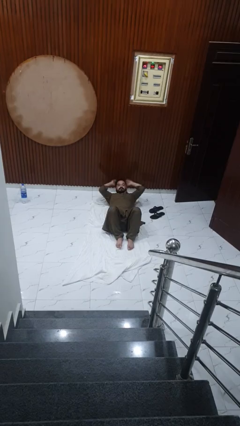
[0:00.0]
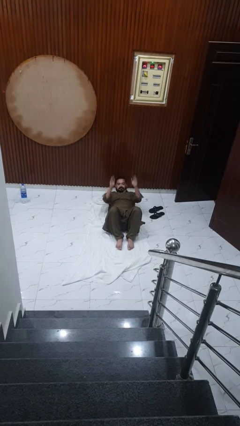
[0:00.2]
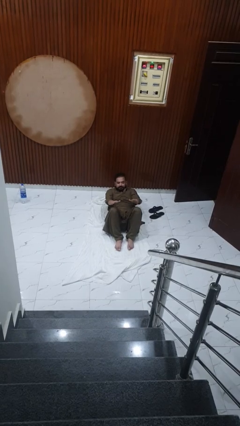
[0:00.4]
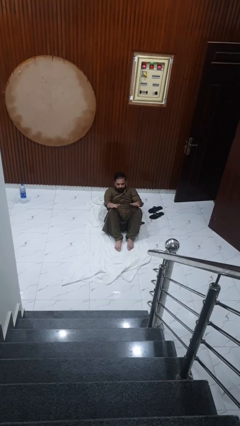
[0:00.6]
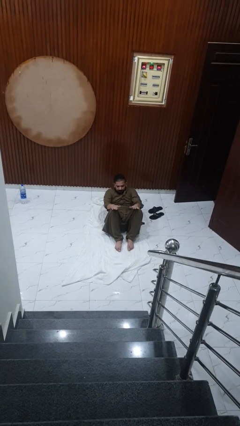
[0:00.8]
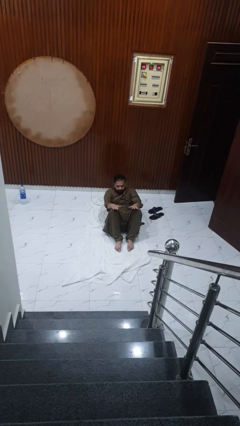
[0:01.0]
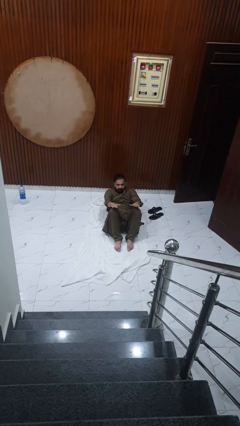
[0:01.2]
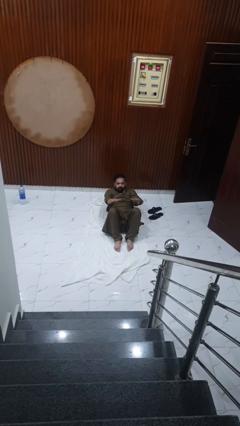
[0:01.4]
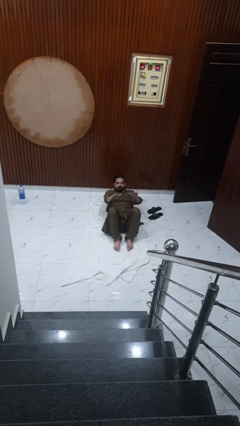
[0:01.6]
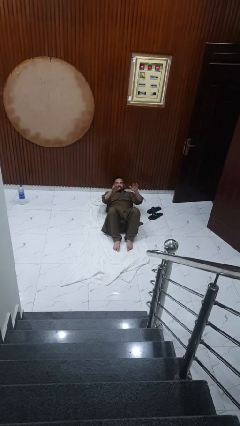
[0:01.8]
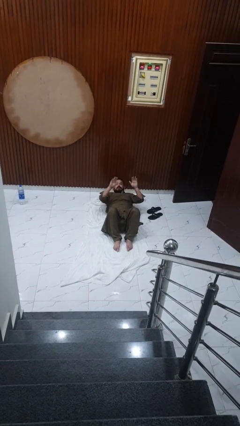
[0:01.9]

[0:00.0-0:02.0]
person exercises with situp

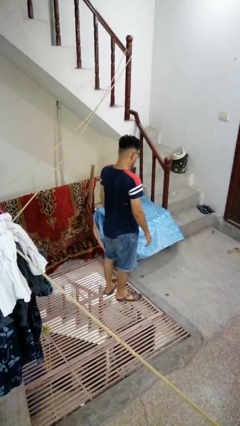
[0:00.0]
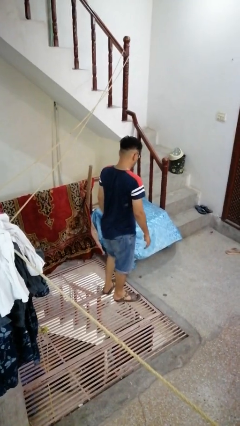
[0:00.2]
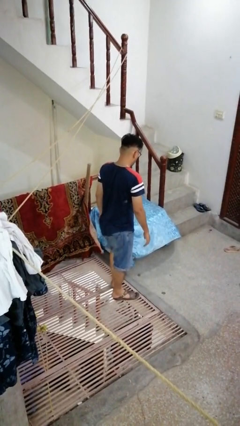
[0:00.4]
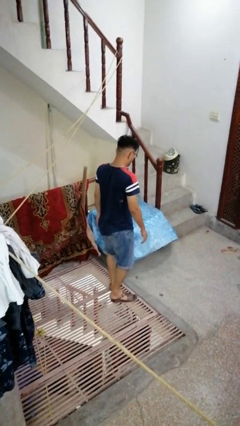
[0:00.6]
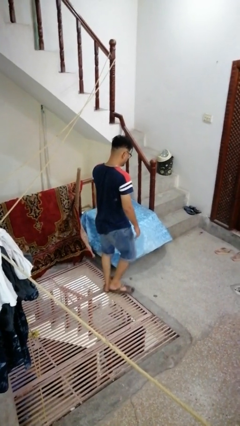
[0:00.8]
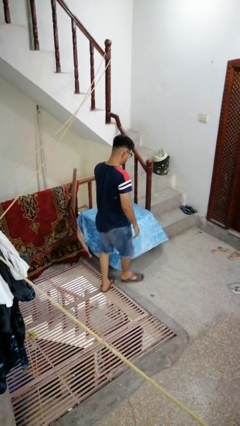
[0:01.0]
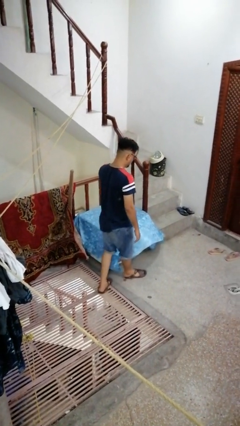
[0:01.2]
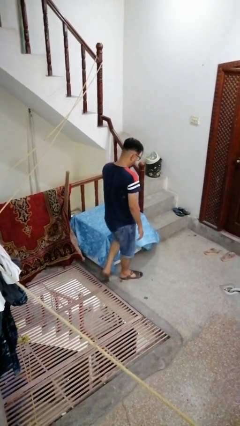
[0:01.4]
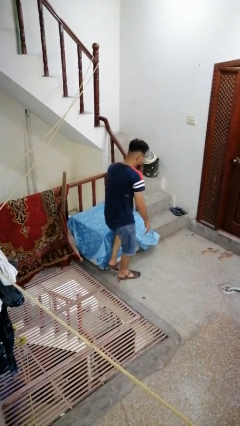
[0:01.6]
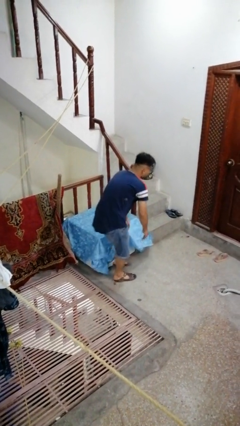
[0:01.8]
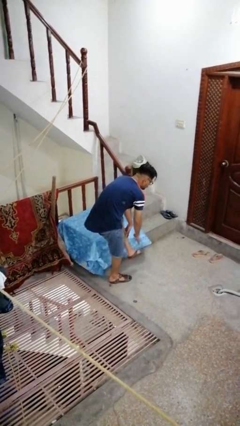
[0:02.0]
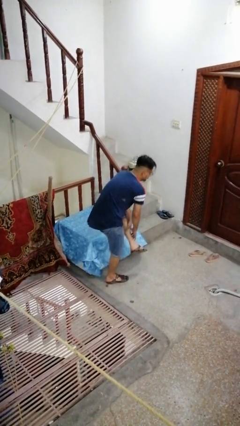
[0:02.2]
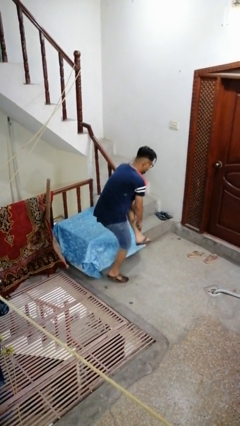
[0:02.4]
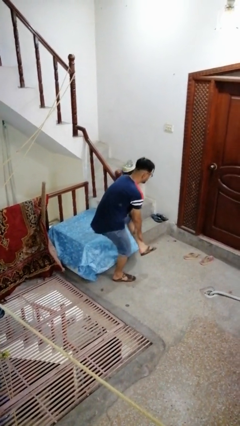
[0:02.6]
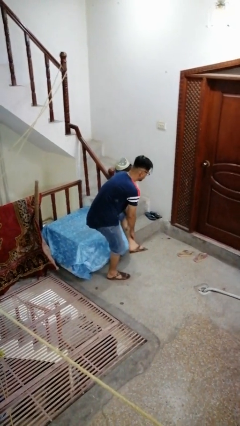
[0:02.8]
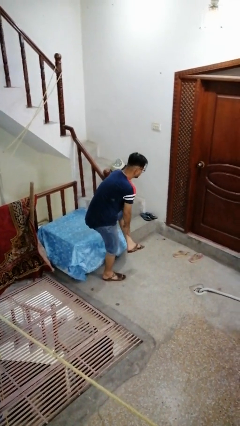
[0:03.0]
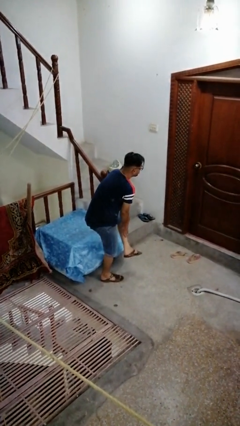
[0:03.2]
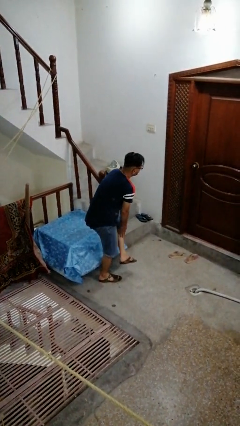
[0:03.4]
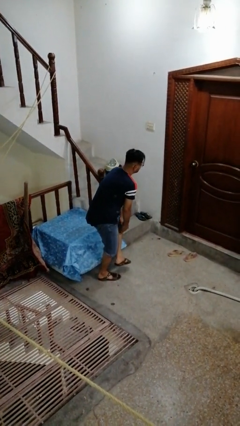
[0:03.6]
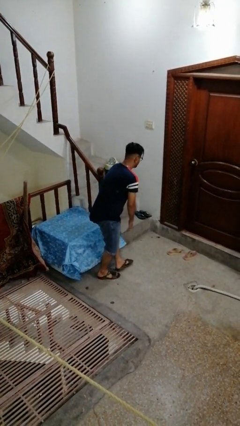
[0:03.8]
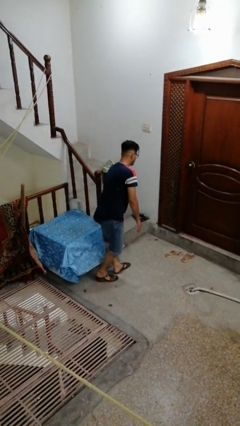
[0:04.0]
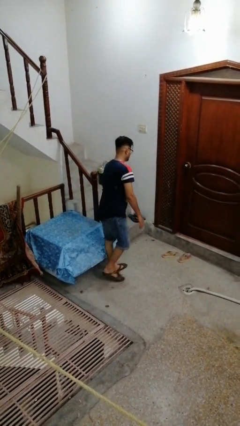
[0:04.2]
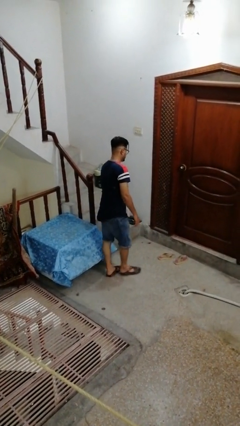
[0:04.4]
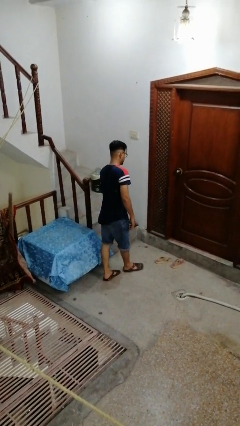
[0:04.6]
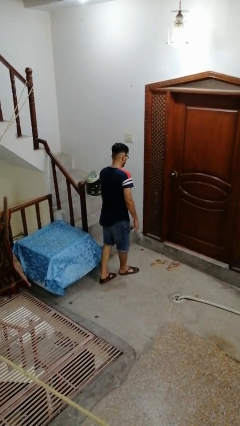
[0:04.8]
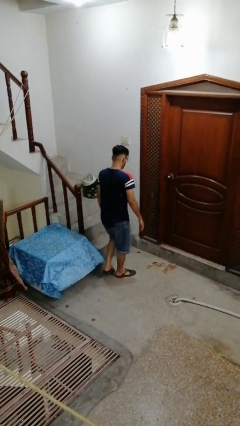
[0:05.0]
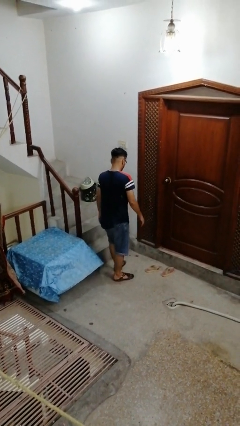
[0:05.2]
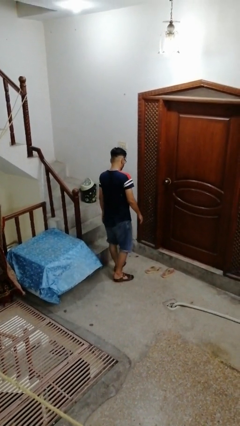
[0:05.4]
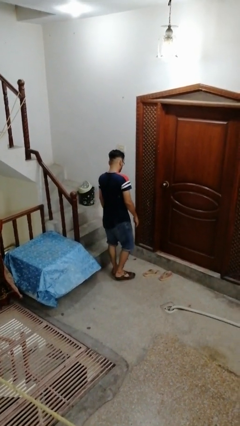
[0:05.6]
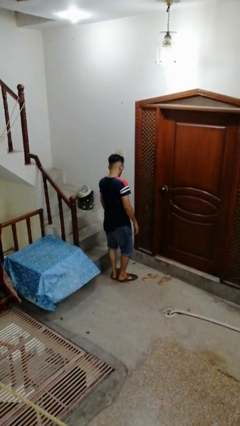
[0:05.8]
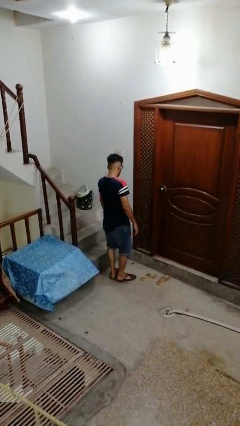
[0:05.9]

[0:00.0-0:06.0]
person bumps into table

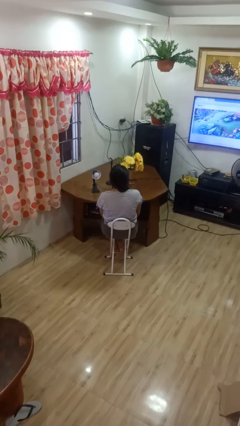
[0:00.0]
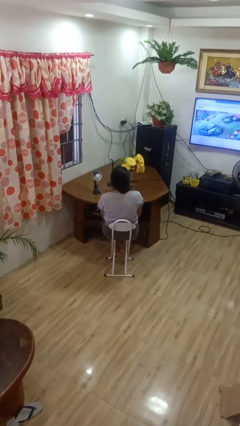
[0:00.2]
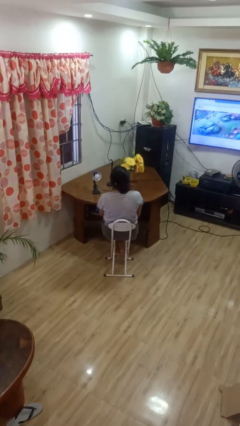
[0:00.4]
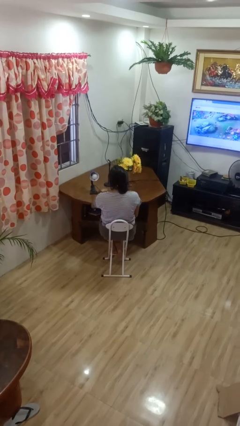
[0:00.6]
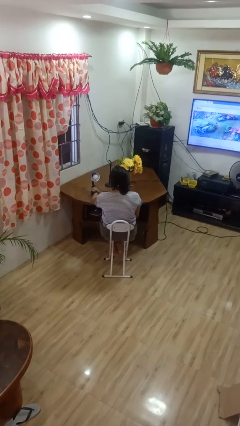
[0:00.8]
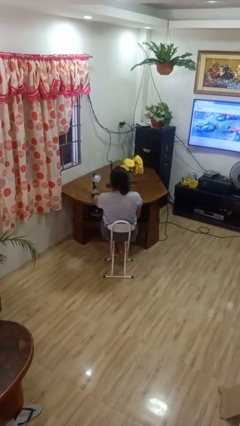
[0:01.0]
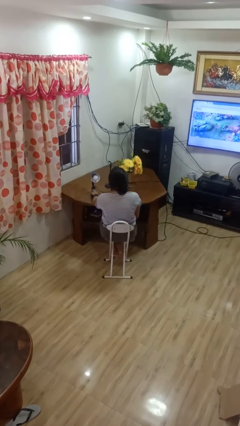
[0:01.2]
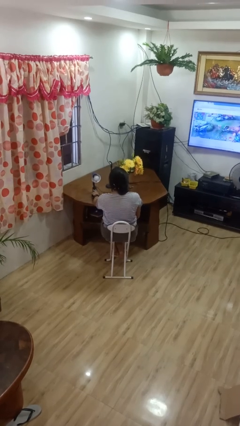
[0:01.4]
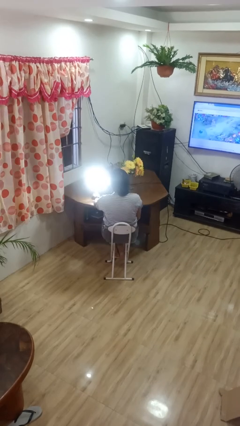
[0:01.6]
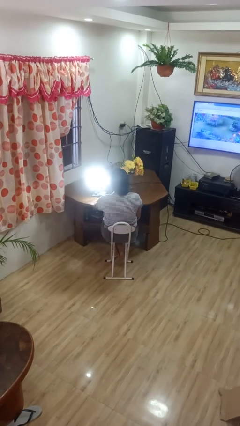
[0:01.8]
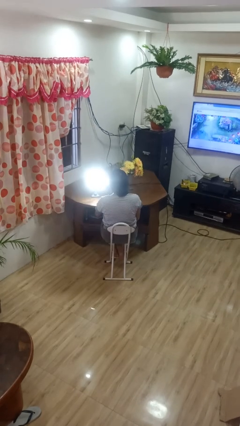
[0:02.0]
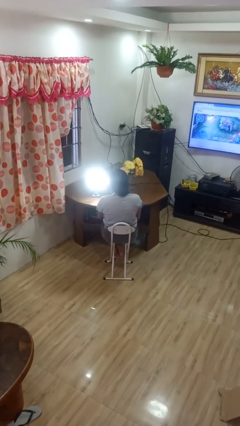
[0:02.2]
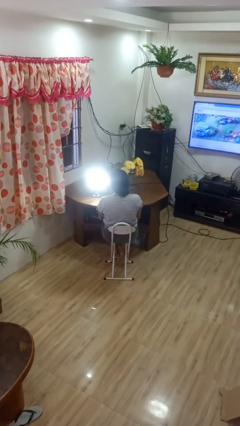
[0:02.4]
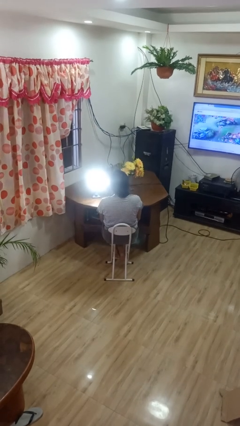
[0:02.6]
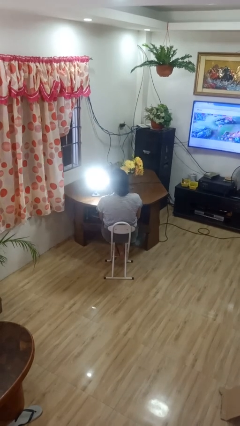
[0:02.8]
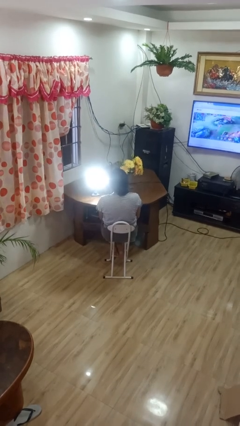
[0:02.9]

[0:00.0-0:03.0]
person turns on lamp

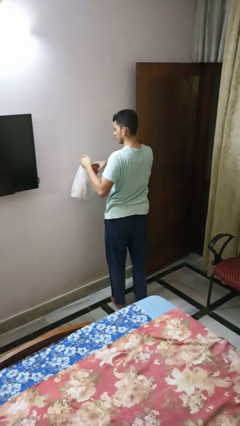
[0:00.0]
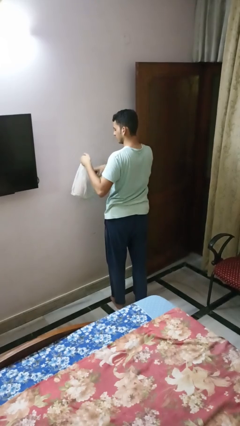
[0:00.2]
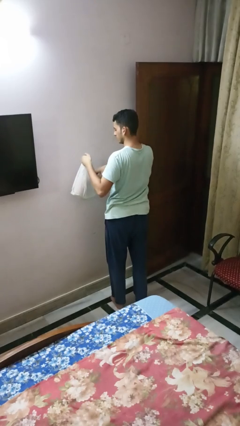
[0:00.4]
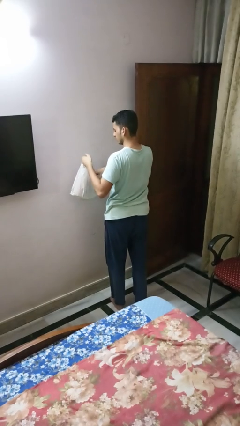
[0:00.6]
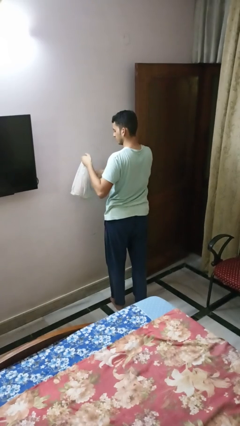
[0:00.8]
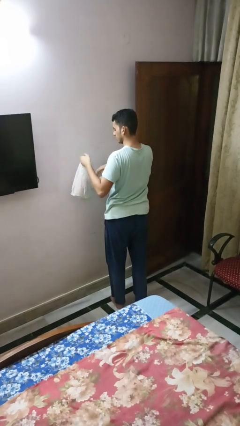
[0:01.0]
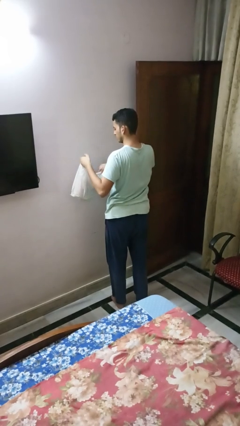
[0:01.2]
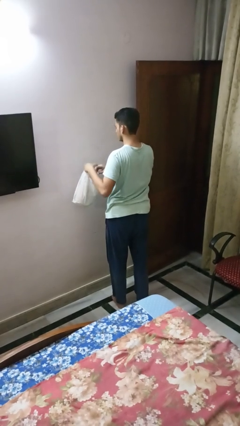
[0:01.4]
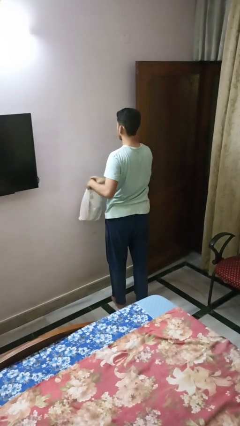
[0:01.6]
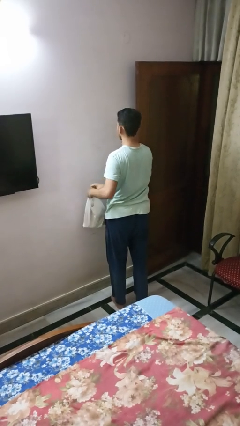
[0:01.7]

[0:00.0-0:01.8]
person puts object into bag

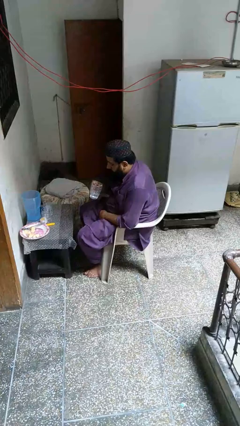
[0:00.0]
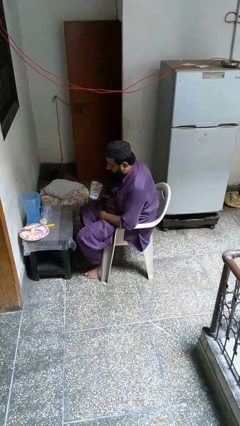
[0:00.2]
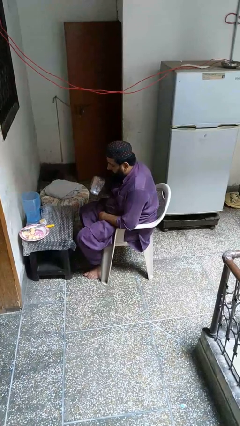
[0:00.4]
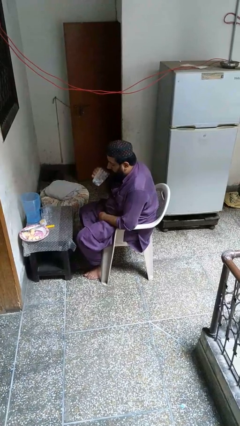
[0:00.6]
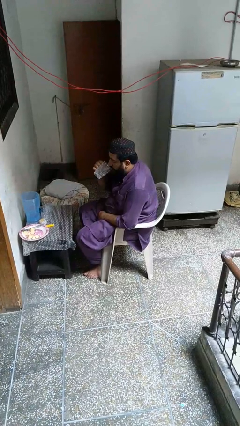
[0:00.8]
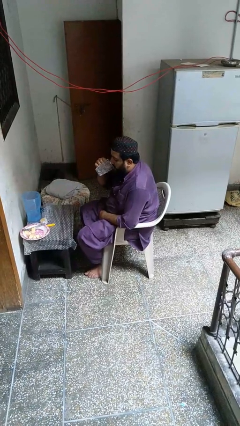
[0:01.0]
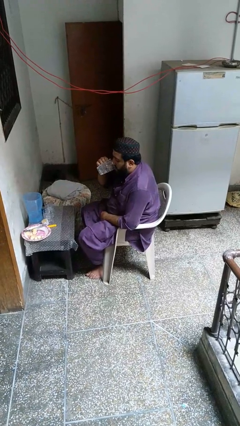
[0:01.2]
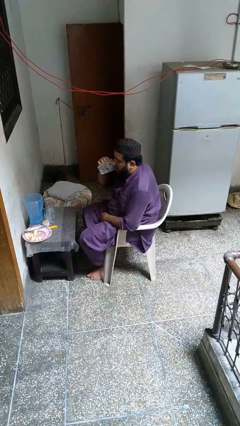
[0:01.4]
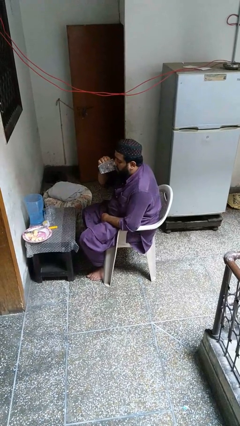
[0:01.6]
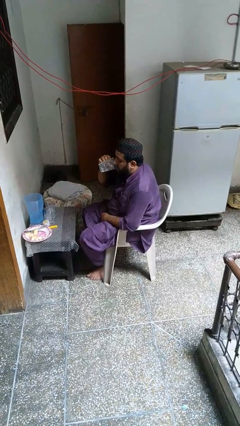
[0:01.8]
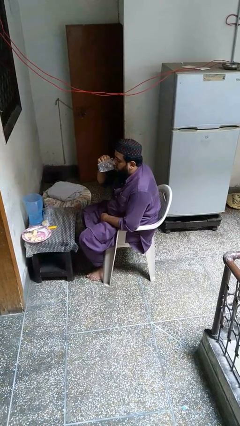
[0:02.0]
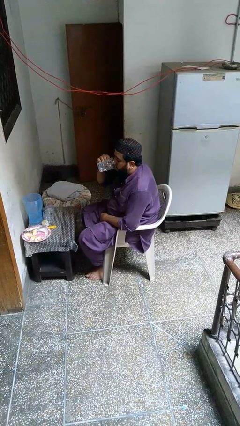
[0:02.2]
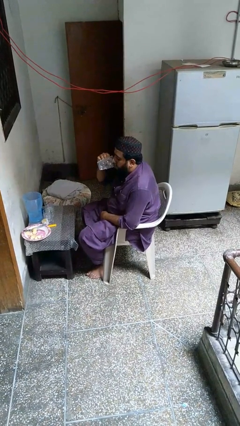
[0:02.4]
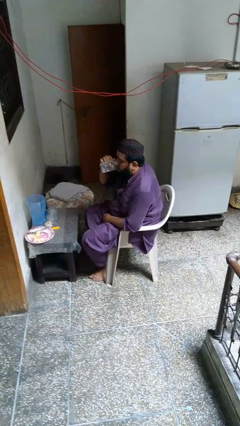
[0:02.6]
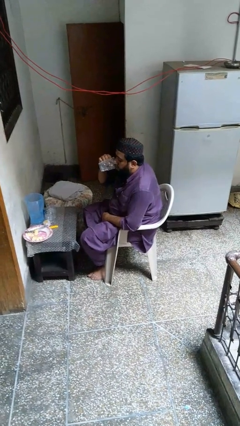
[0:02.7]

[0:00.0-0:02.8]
person drinks from mug

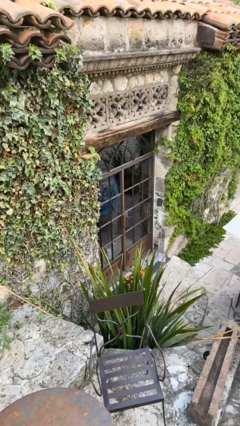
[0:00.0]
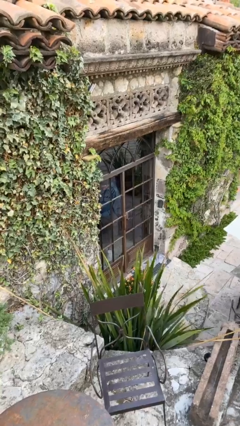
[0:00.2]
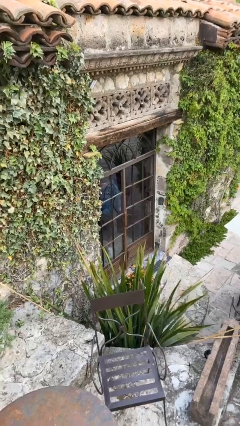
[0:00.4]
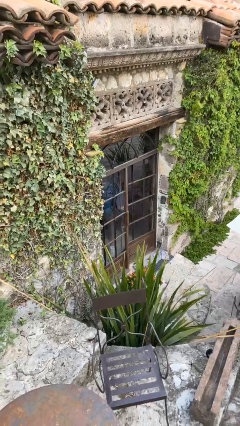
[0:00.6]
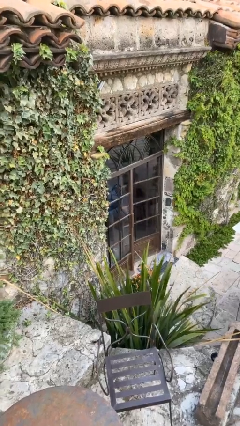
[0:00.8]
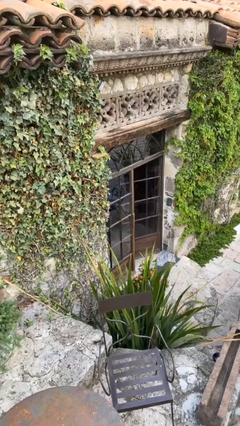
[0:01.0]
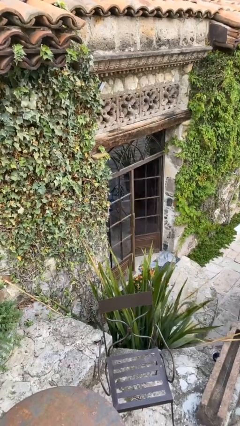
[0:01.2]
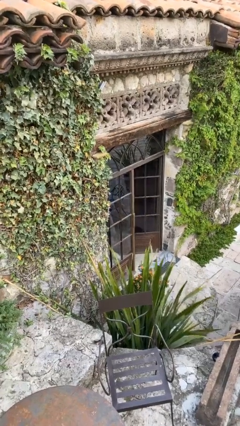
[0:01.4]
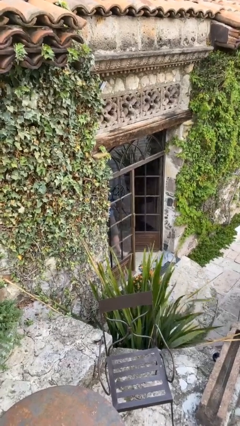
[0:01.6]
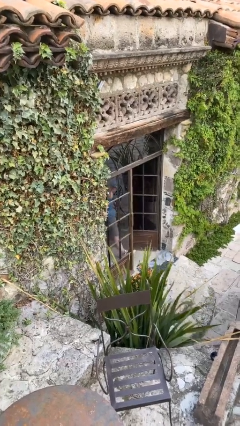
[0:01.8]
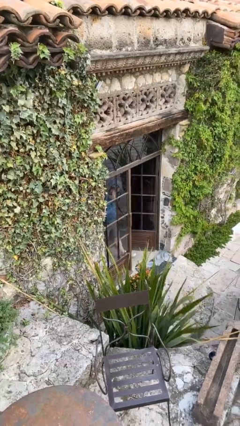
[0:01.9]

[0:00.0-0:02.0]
person opens facility door

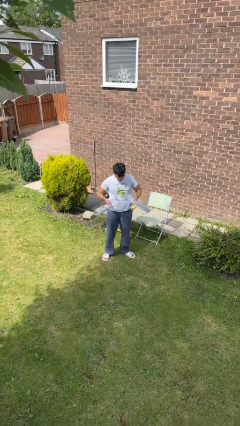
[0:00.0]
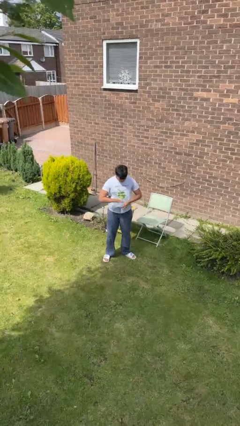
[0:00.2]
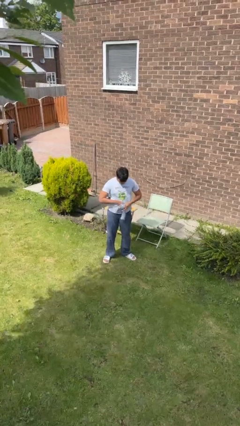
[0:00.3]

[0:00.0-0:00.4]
person ties jacket around waist
